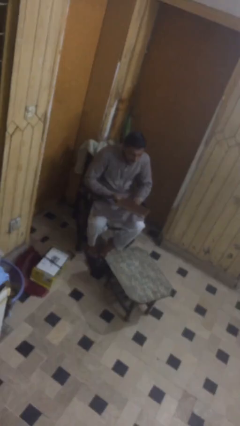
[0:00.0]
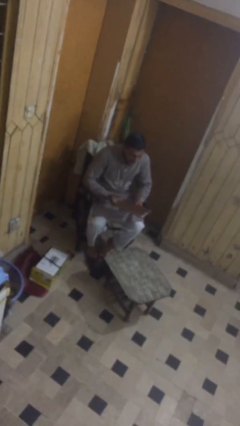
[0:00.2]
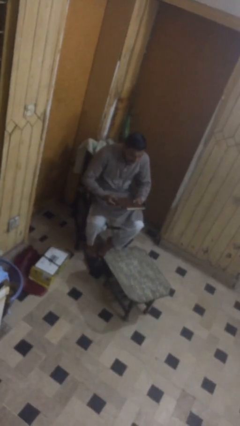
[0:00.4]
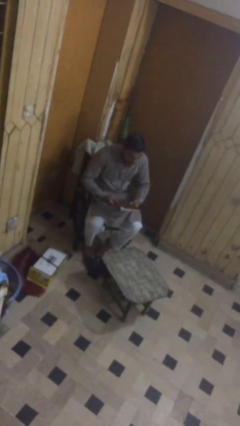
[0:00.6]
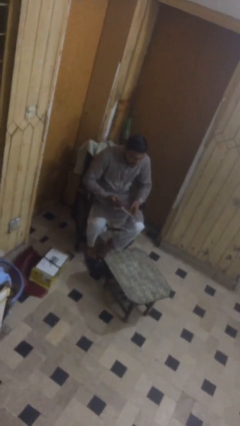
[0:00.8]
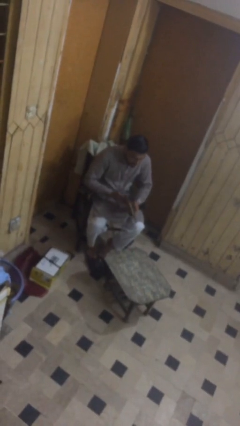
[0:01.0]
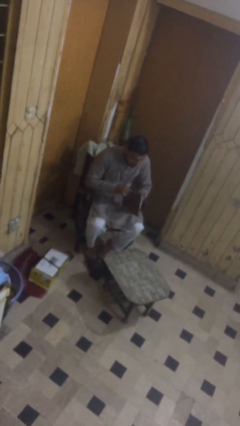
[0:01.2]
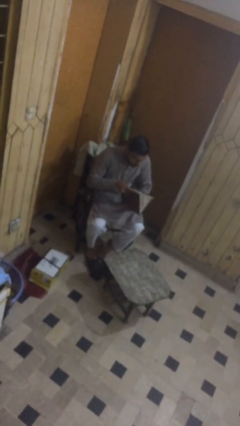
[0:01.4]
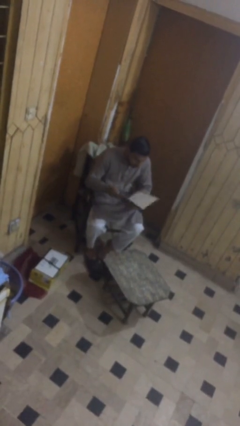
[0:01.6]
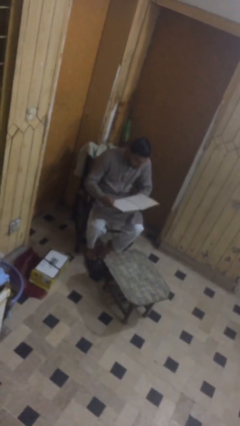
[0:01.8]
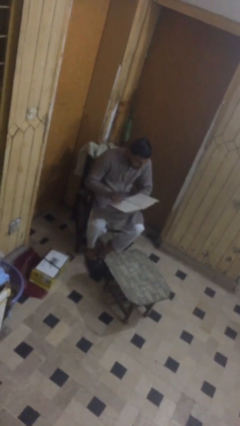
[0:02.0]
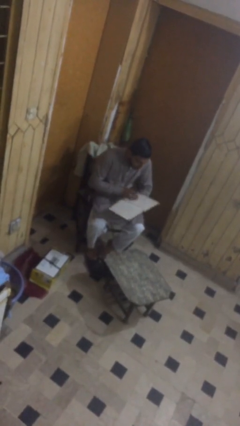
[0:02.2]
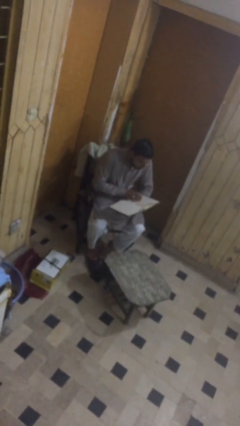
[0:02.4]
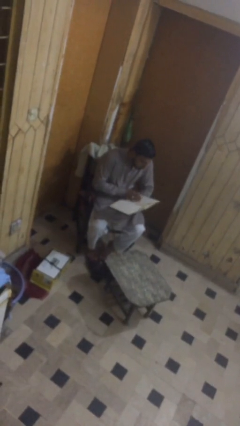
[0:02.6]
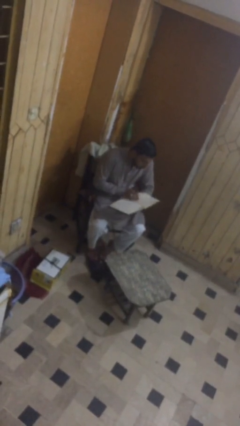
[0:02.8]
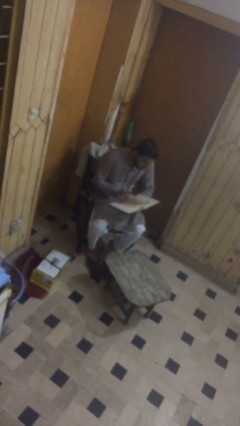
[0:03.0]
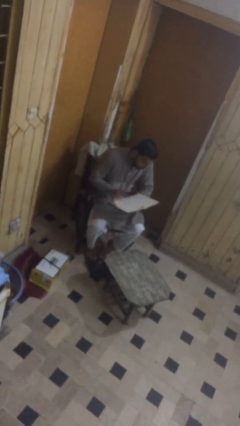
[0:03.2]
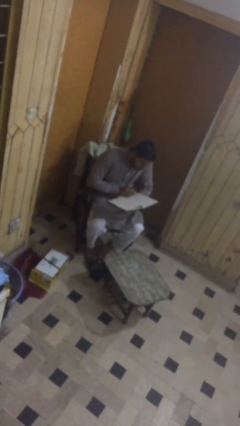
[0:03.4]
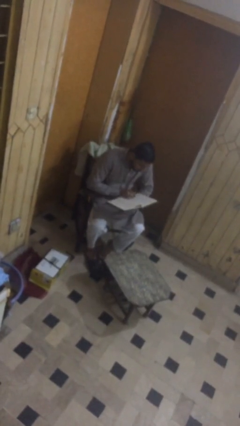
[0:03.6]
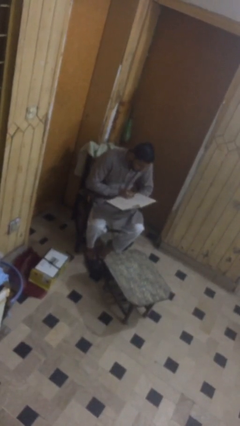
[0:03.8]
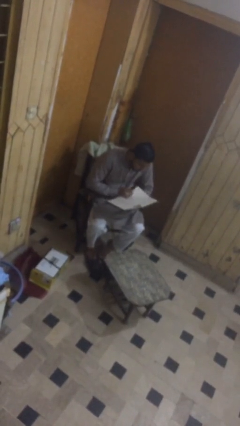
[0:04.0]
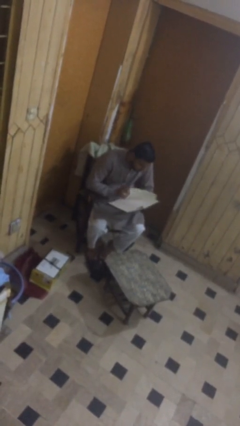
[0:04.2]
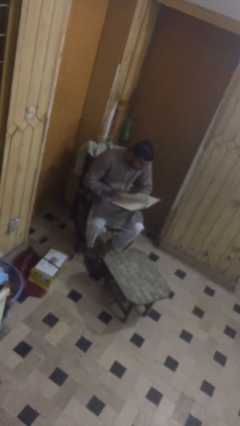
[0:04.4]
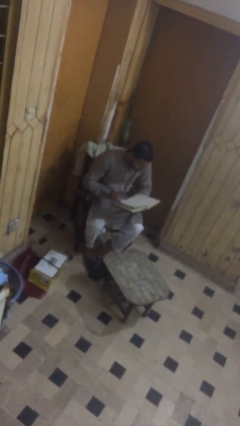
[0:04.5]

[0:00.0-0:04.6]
person reads document

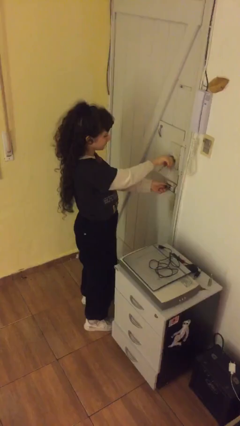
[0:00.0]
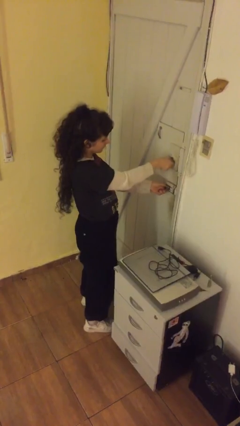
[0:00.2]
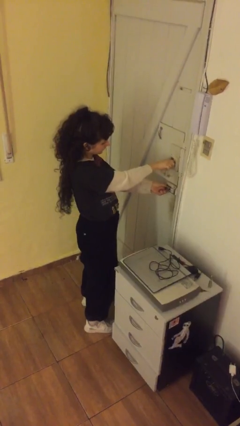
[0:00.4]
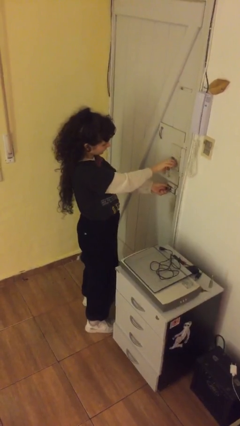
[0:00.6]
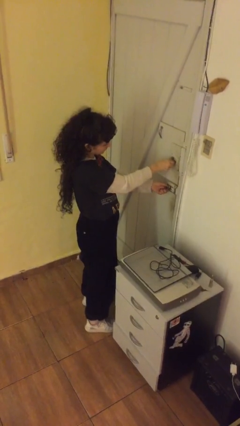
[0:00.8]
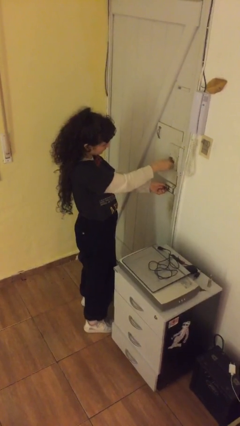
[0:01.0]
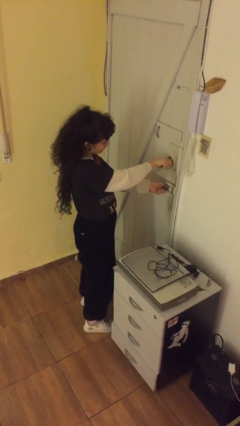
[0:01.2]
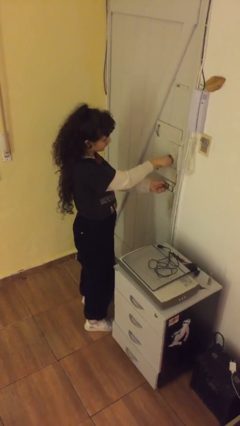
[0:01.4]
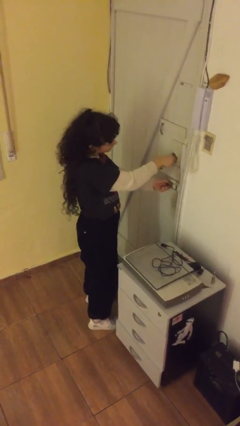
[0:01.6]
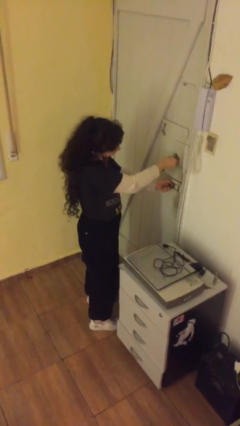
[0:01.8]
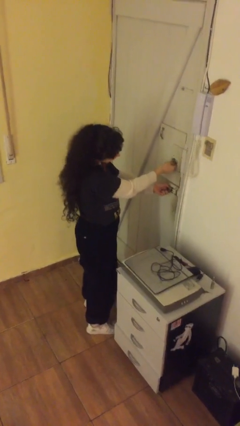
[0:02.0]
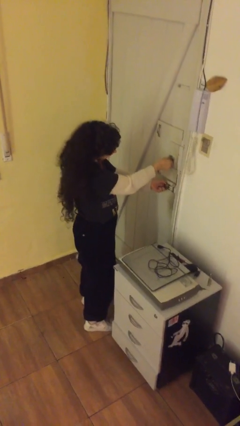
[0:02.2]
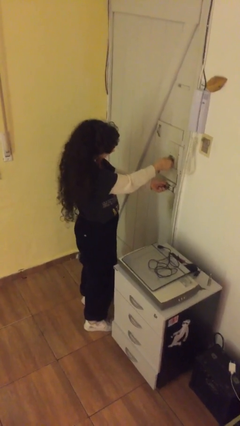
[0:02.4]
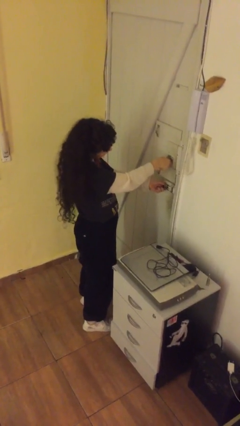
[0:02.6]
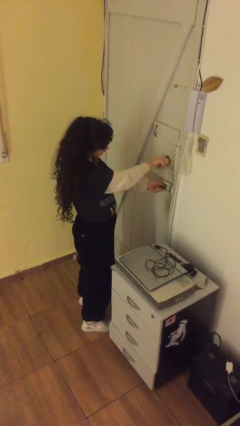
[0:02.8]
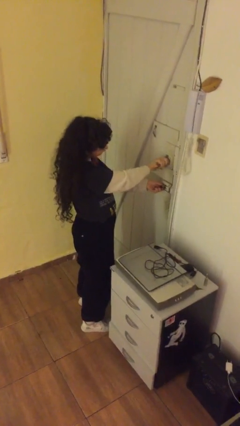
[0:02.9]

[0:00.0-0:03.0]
person locks door with keys

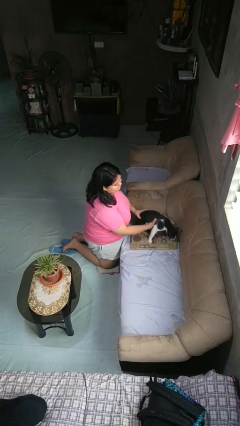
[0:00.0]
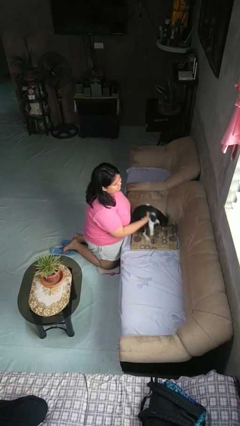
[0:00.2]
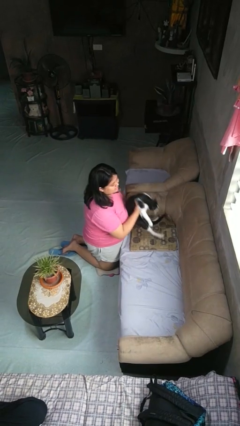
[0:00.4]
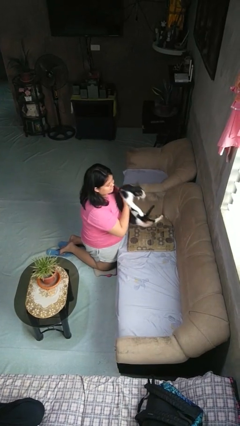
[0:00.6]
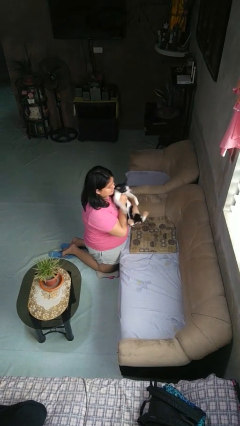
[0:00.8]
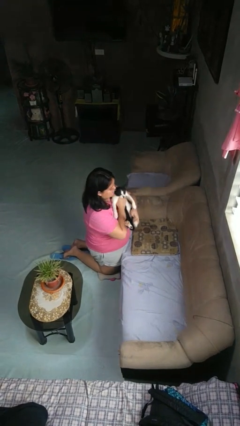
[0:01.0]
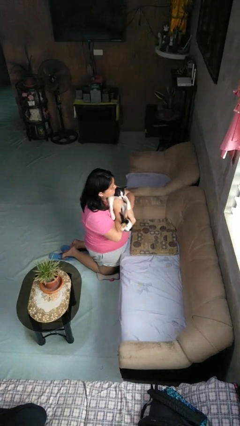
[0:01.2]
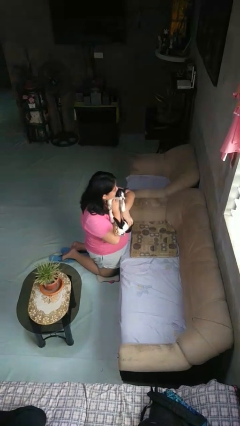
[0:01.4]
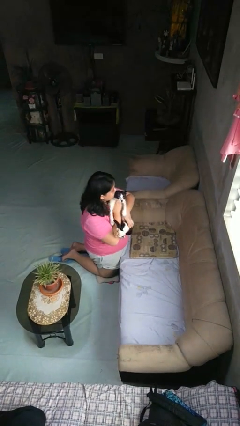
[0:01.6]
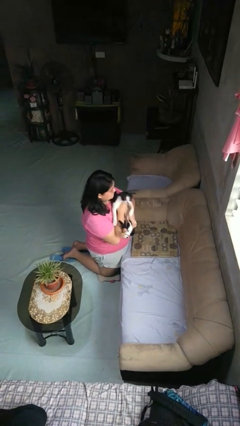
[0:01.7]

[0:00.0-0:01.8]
person hugs cat

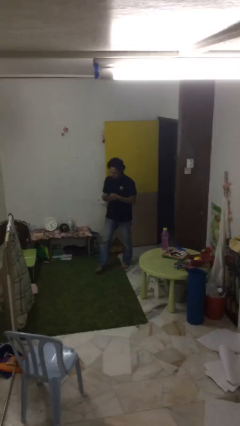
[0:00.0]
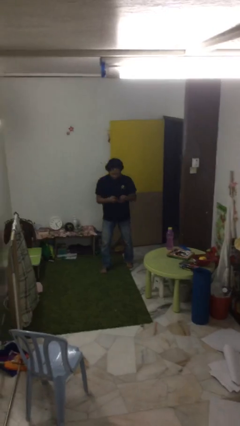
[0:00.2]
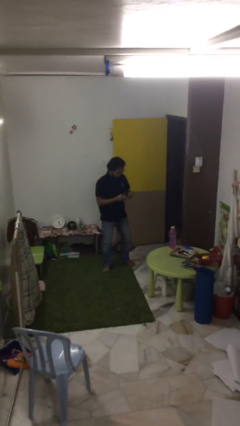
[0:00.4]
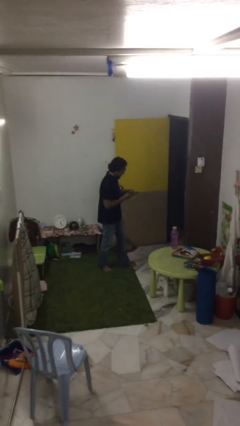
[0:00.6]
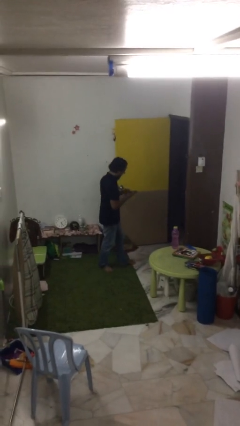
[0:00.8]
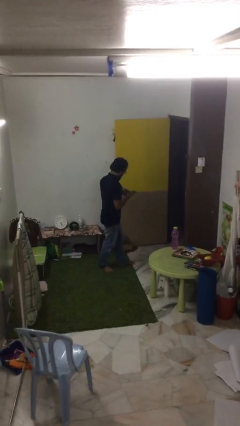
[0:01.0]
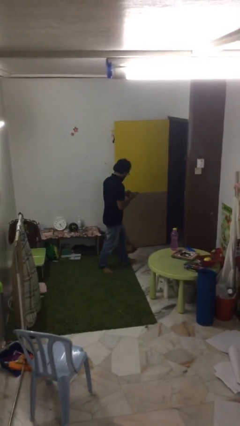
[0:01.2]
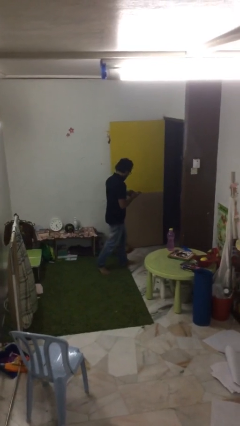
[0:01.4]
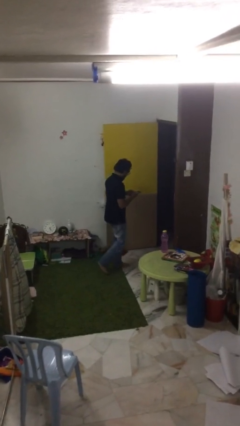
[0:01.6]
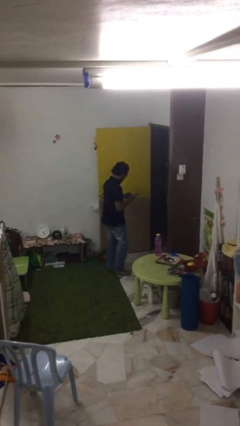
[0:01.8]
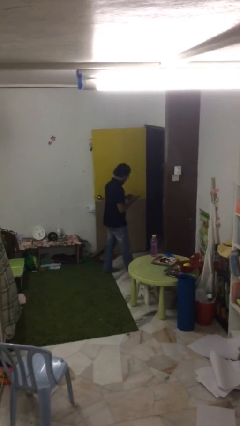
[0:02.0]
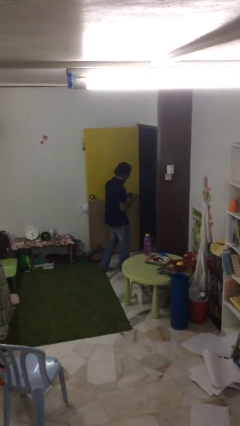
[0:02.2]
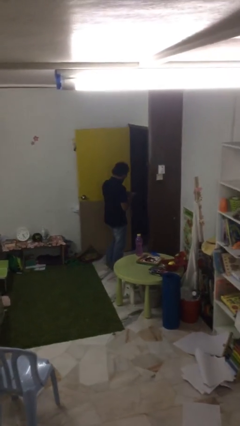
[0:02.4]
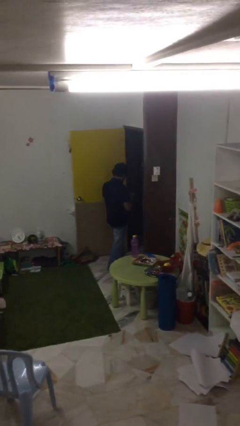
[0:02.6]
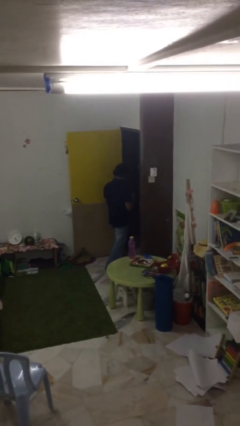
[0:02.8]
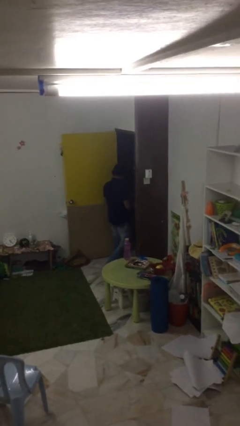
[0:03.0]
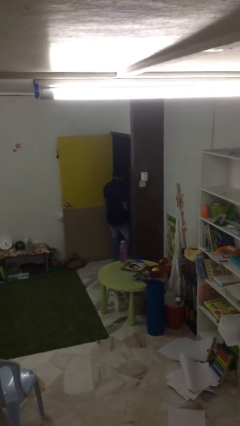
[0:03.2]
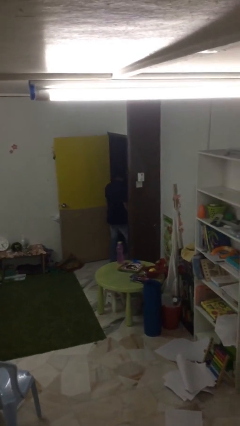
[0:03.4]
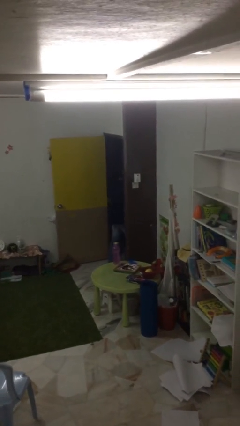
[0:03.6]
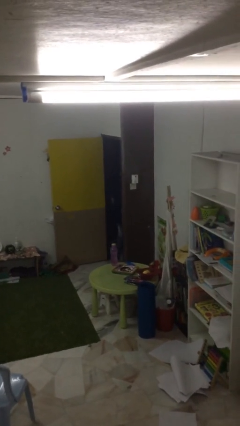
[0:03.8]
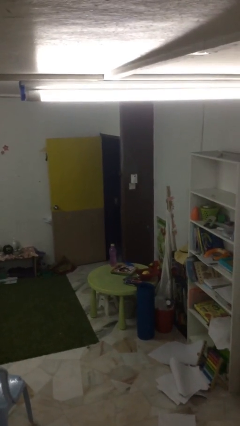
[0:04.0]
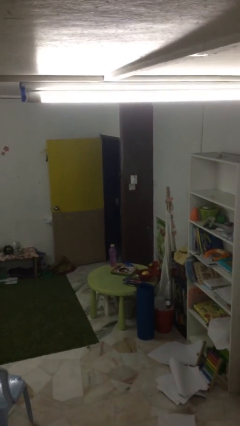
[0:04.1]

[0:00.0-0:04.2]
person exits scene through structure

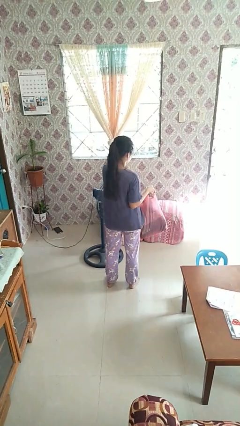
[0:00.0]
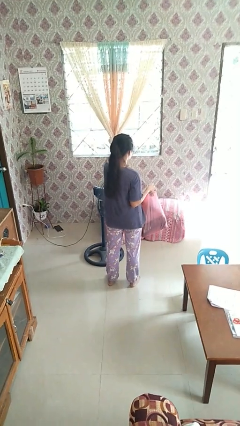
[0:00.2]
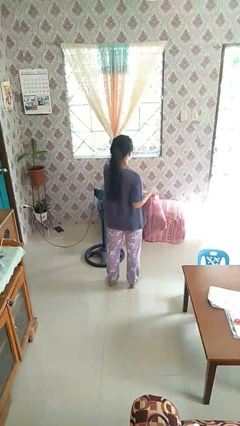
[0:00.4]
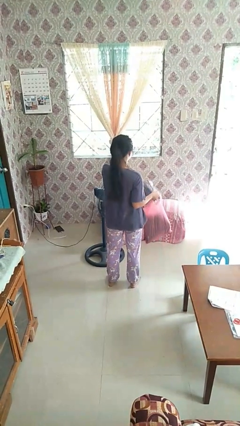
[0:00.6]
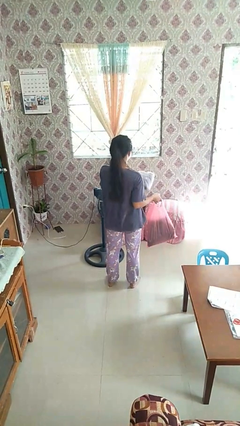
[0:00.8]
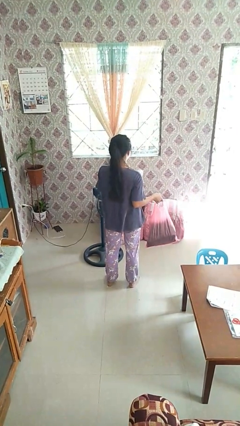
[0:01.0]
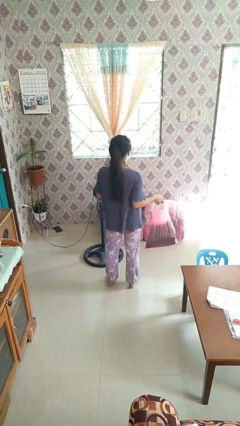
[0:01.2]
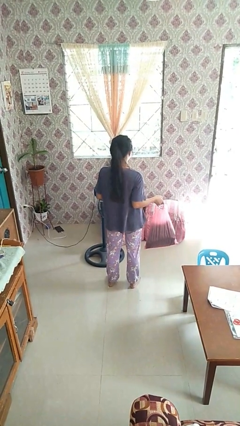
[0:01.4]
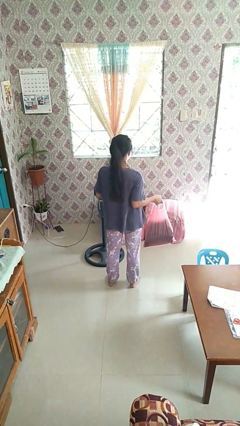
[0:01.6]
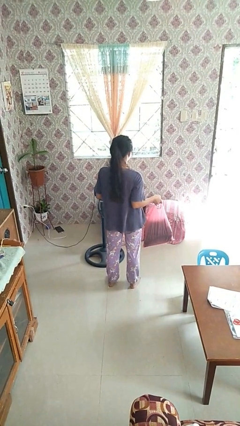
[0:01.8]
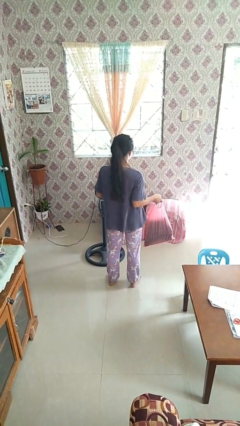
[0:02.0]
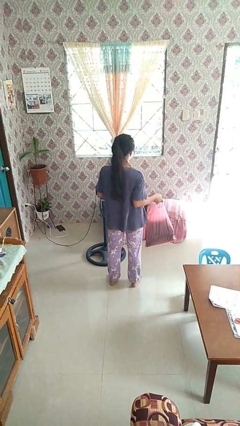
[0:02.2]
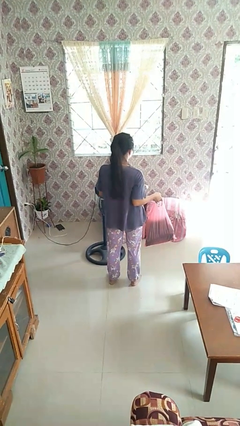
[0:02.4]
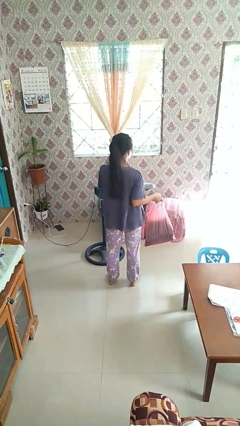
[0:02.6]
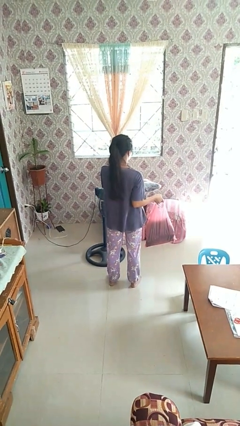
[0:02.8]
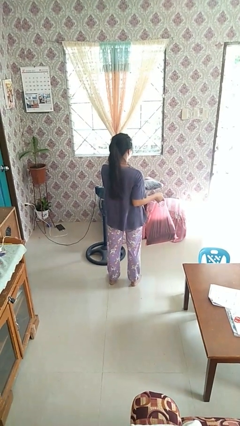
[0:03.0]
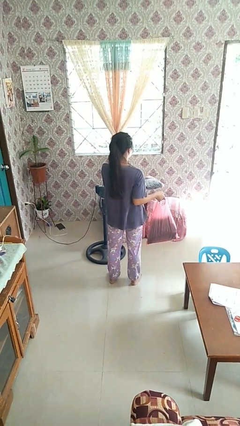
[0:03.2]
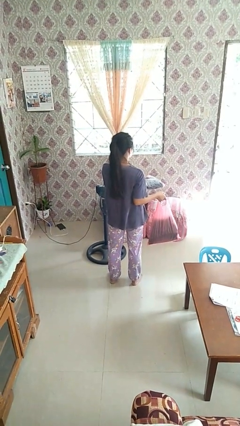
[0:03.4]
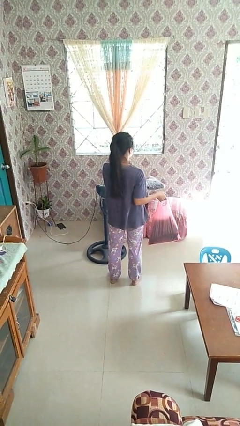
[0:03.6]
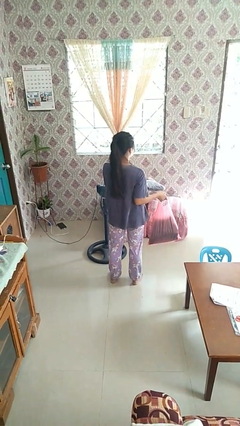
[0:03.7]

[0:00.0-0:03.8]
person takes object from bag

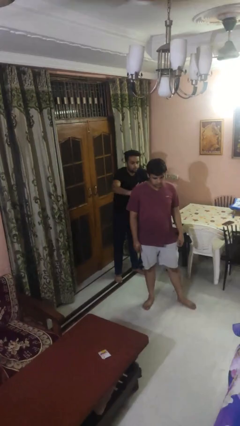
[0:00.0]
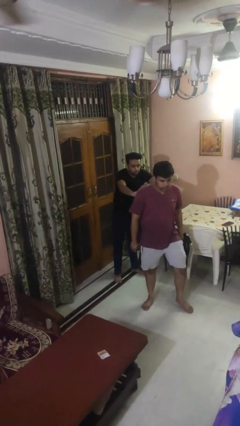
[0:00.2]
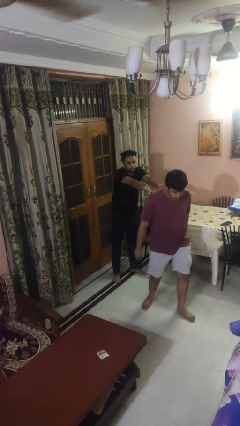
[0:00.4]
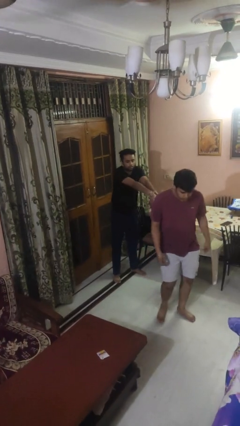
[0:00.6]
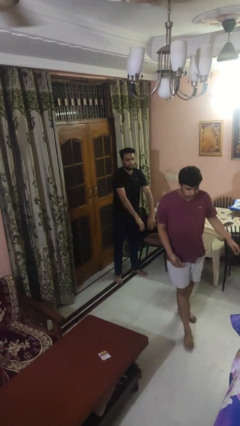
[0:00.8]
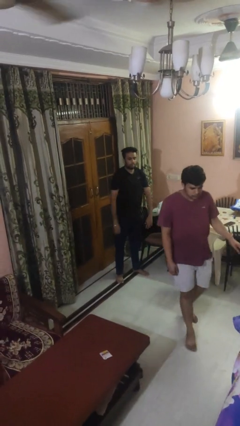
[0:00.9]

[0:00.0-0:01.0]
person shoves person
